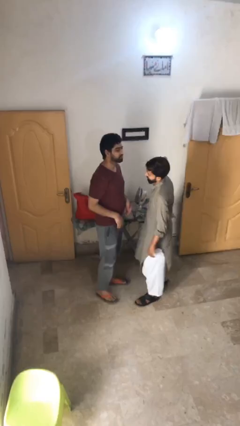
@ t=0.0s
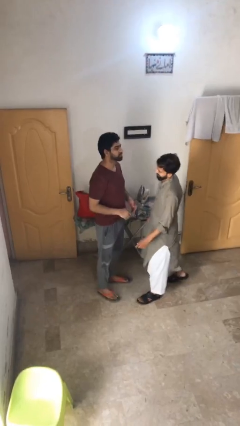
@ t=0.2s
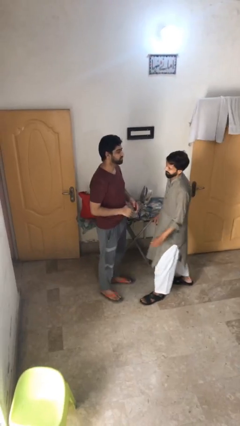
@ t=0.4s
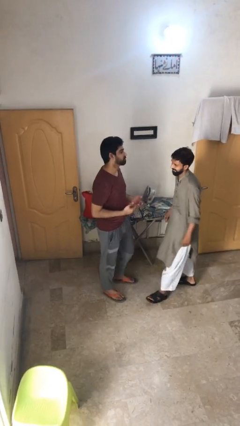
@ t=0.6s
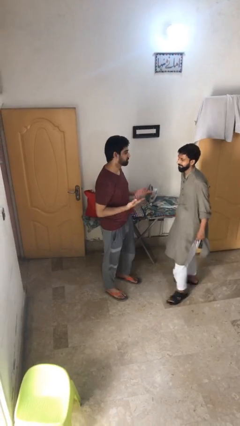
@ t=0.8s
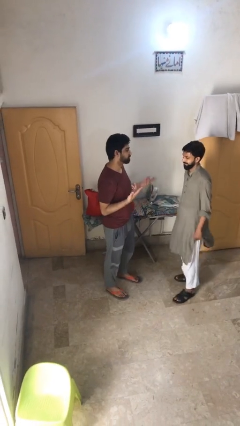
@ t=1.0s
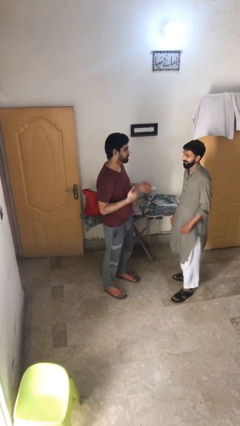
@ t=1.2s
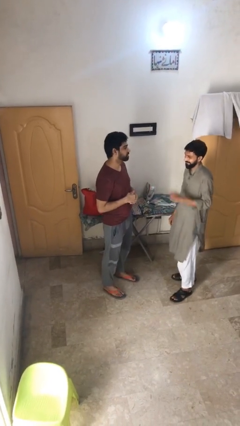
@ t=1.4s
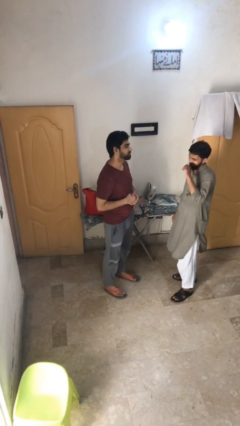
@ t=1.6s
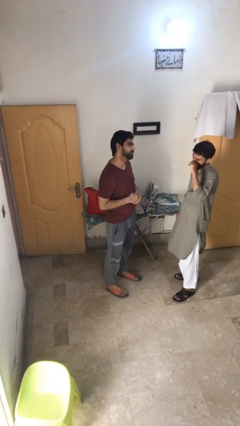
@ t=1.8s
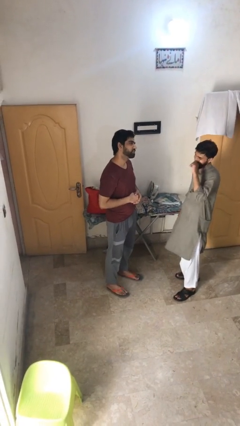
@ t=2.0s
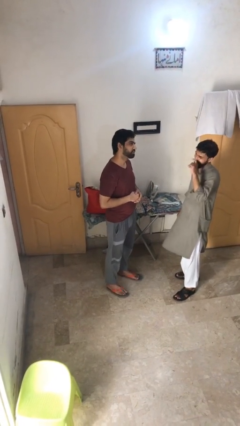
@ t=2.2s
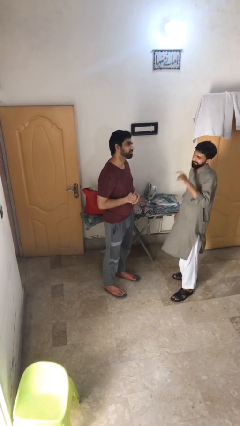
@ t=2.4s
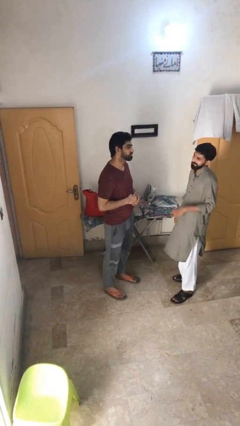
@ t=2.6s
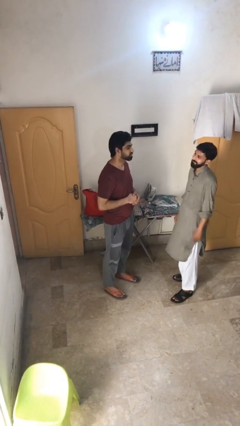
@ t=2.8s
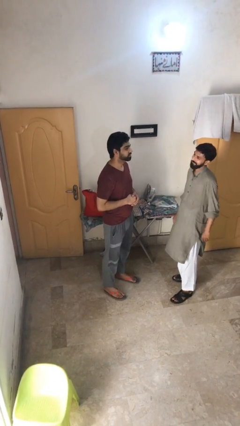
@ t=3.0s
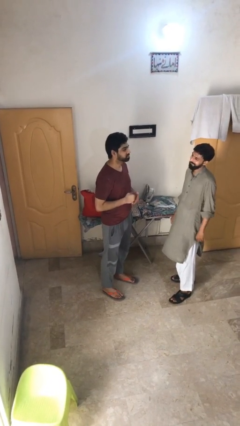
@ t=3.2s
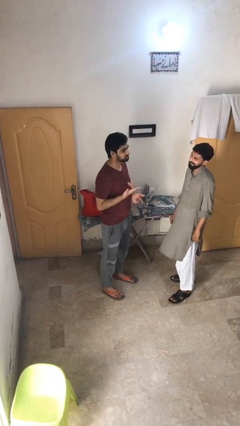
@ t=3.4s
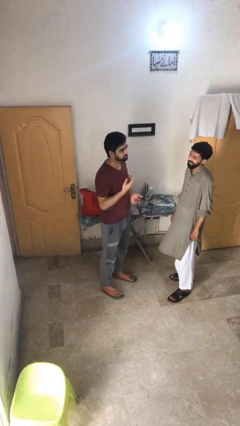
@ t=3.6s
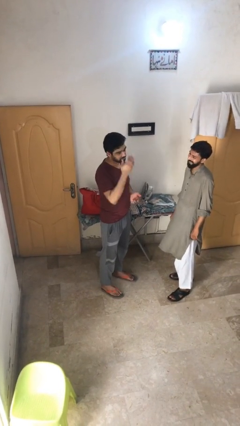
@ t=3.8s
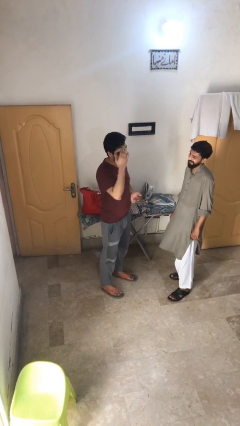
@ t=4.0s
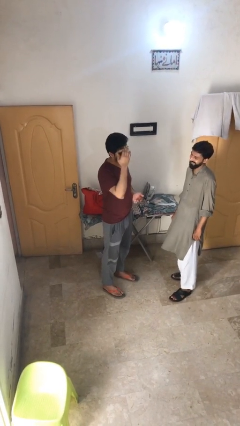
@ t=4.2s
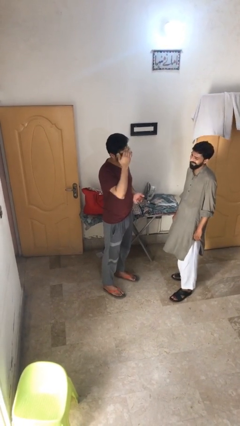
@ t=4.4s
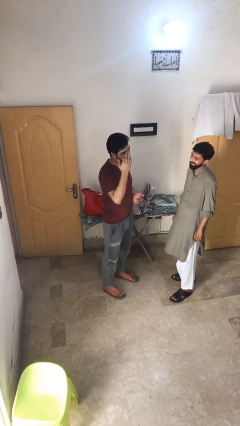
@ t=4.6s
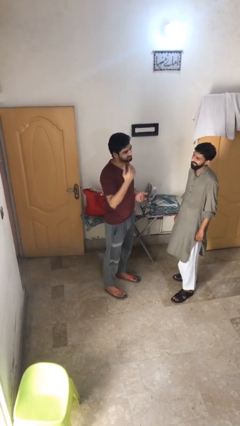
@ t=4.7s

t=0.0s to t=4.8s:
person talks to person

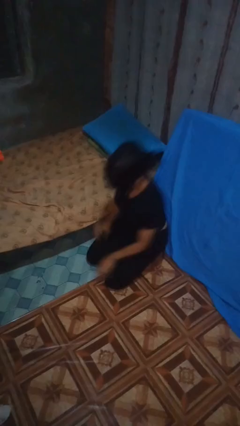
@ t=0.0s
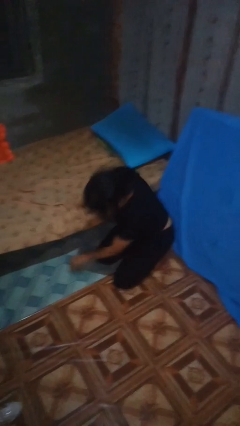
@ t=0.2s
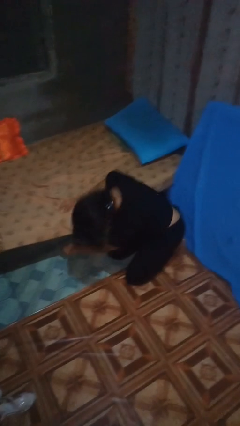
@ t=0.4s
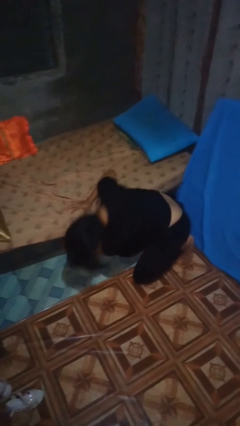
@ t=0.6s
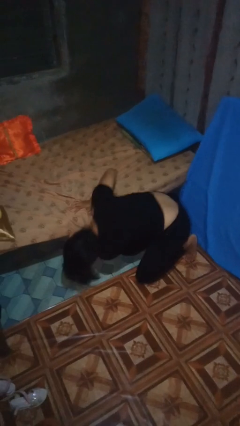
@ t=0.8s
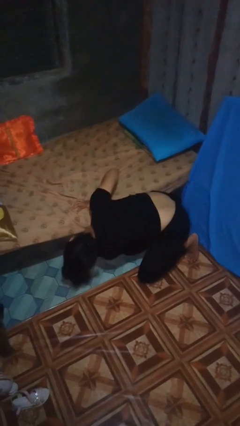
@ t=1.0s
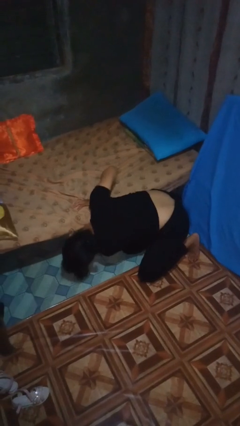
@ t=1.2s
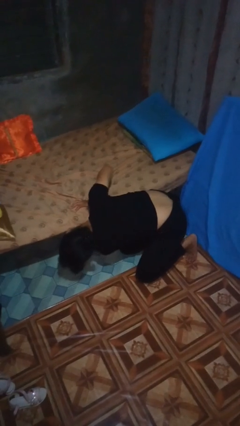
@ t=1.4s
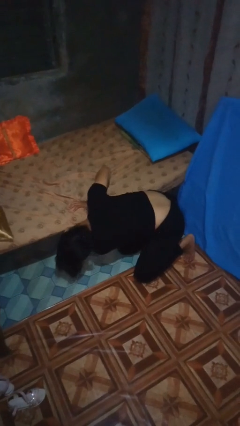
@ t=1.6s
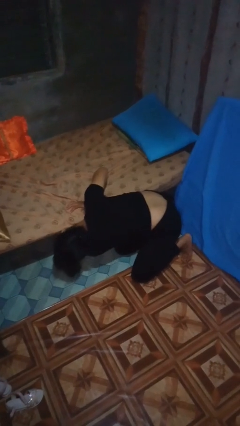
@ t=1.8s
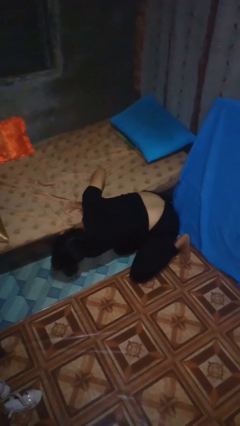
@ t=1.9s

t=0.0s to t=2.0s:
person searches under bed

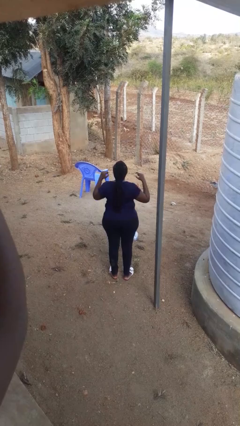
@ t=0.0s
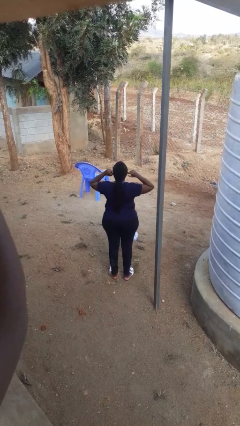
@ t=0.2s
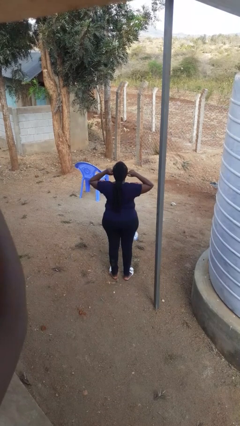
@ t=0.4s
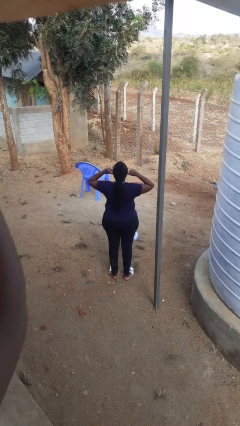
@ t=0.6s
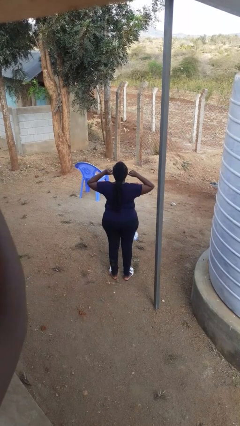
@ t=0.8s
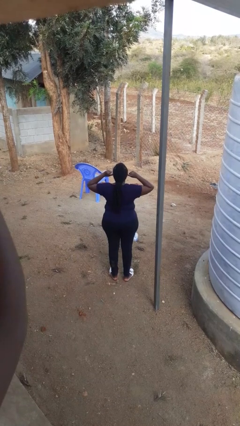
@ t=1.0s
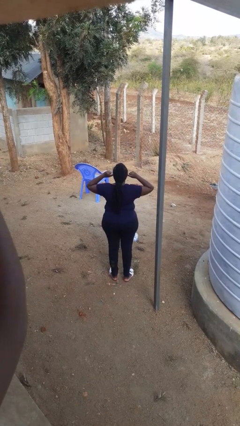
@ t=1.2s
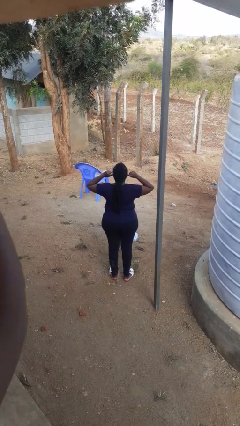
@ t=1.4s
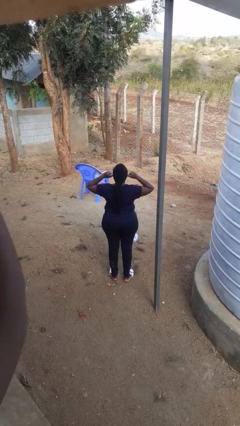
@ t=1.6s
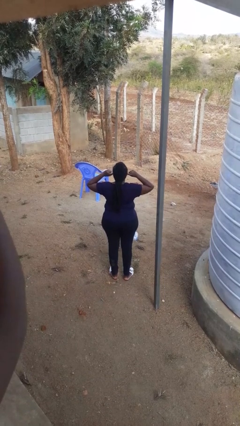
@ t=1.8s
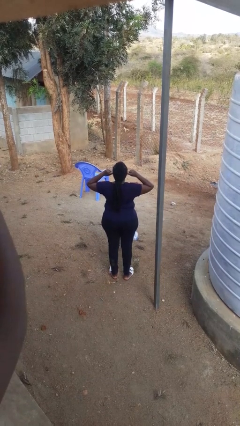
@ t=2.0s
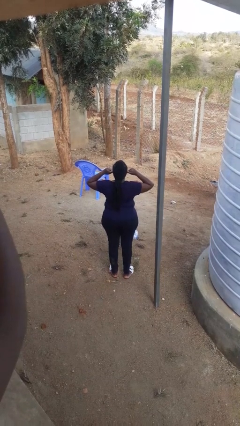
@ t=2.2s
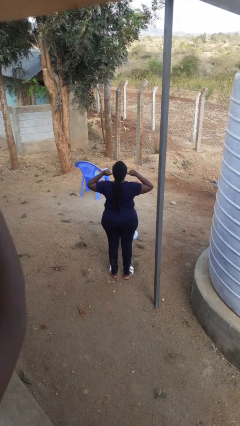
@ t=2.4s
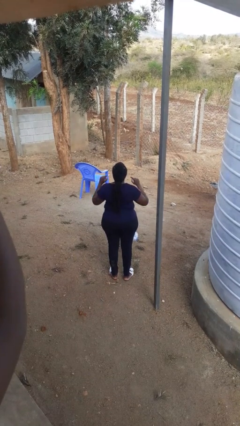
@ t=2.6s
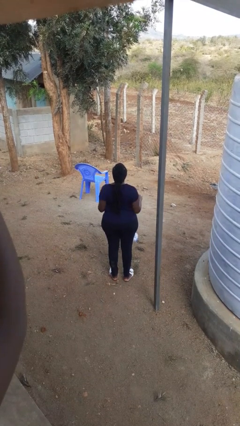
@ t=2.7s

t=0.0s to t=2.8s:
person puts fingers in ear

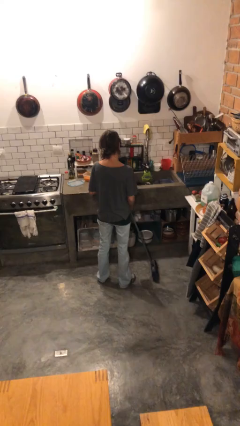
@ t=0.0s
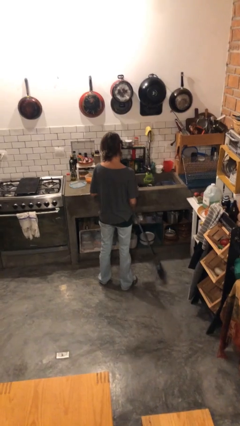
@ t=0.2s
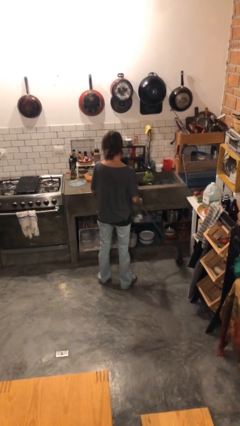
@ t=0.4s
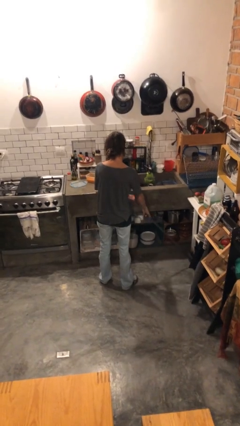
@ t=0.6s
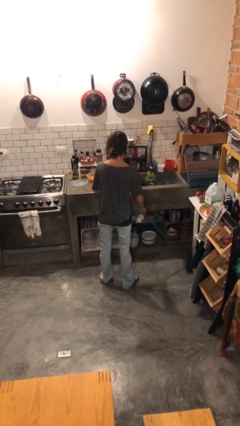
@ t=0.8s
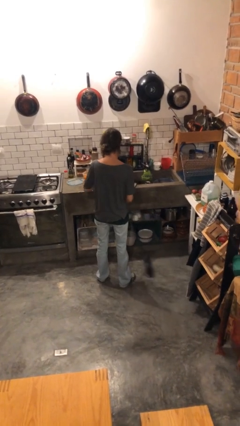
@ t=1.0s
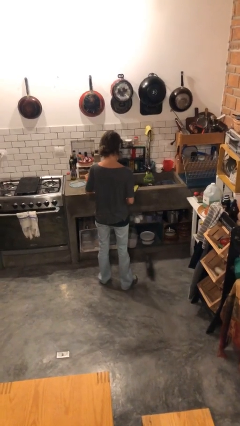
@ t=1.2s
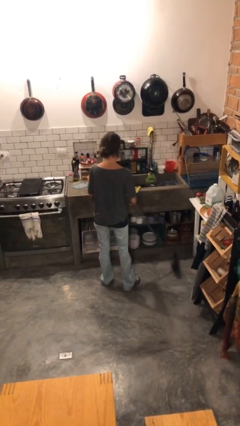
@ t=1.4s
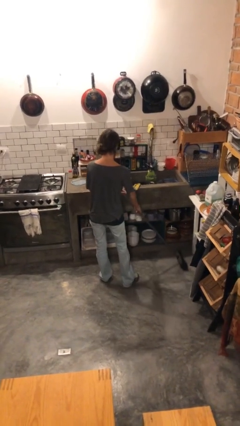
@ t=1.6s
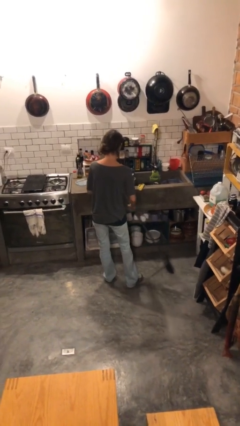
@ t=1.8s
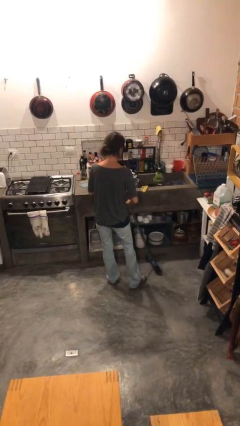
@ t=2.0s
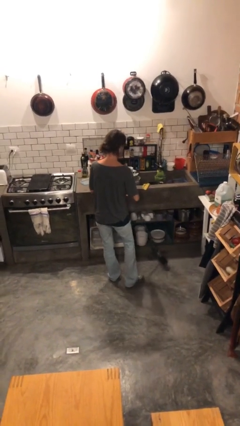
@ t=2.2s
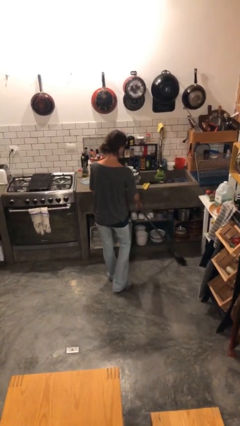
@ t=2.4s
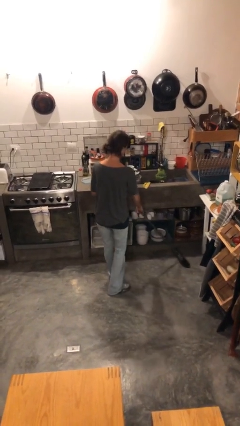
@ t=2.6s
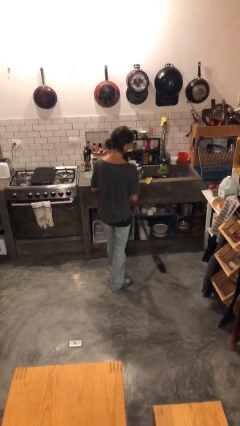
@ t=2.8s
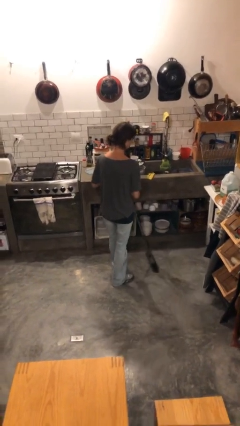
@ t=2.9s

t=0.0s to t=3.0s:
person sweeps floor

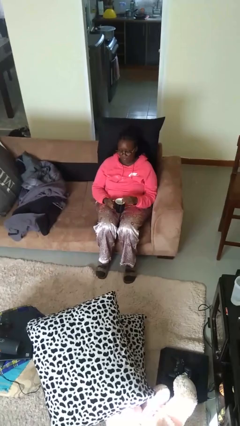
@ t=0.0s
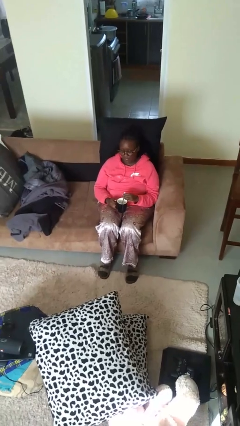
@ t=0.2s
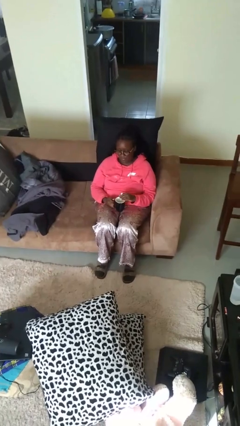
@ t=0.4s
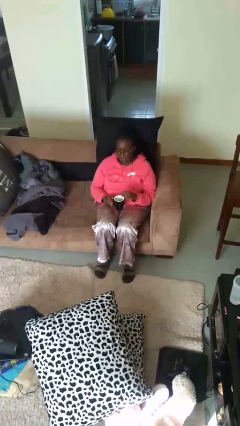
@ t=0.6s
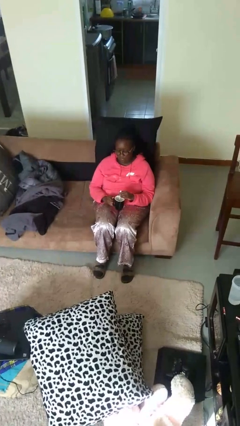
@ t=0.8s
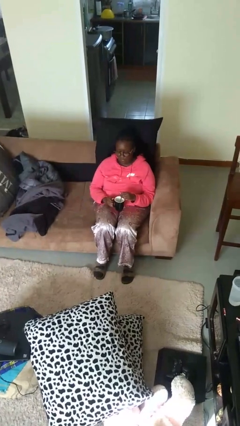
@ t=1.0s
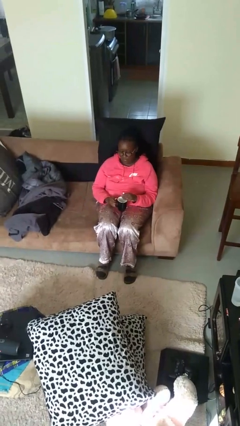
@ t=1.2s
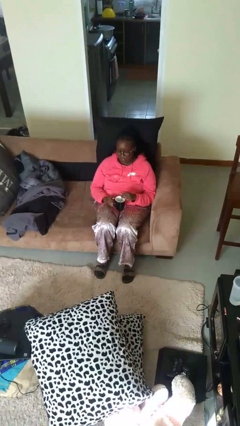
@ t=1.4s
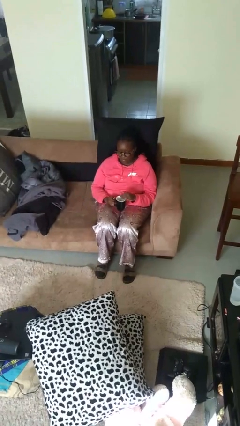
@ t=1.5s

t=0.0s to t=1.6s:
person stirs mug

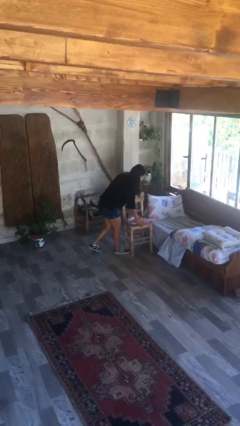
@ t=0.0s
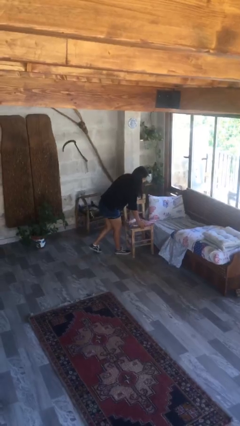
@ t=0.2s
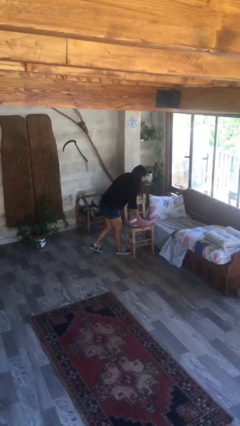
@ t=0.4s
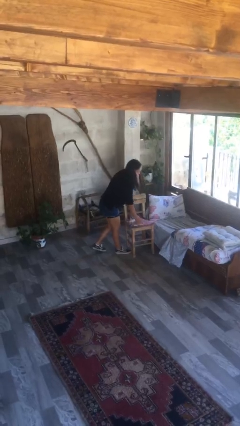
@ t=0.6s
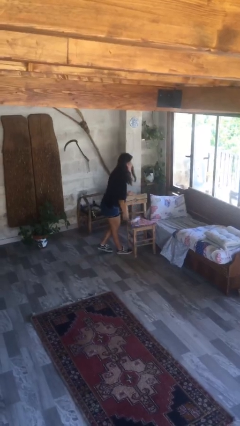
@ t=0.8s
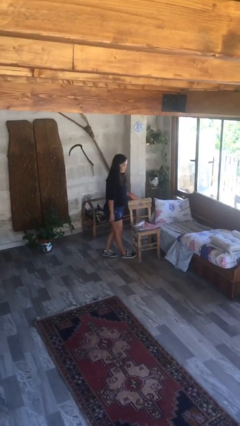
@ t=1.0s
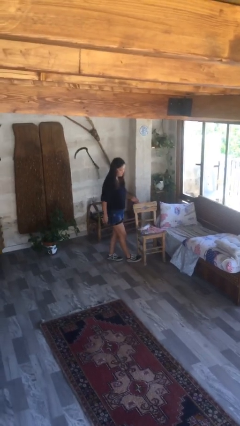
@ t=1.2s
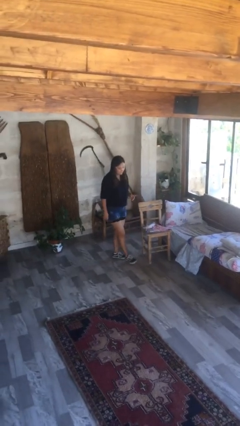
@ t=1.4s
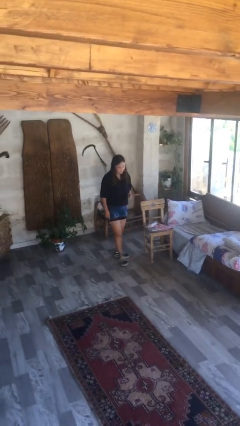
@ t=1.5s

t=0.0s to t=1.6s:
person puts down object on floor

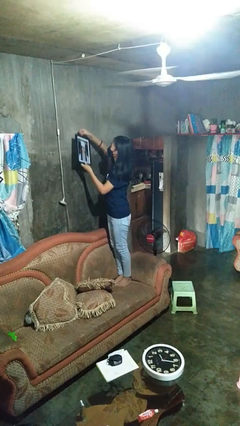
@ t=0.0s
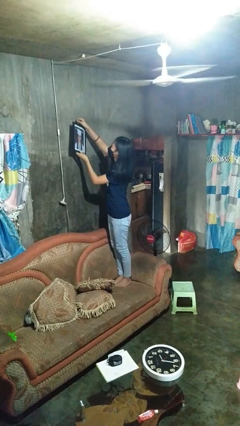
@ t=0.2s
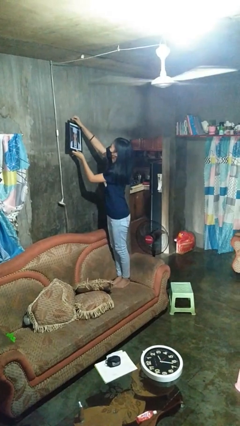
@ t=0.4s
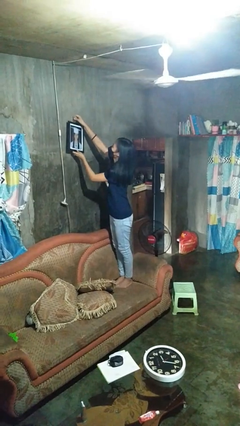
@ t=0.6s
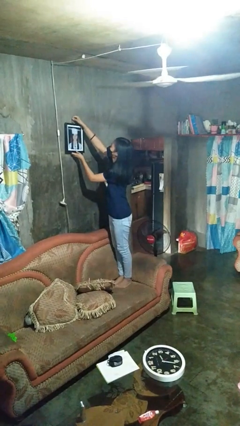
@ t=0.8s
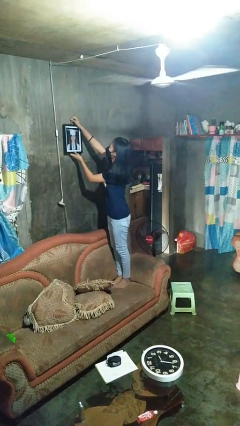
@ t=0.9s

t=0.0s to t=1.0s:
person puts up picture frame
